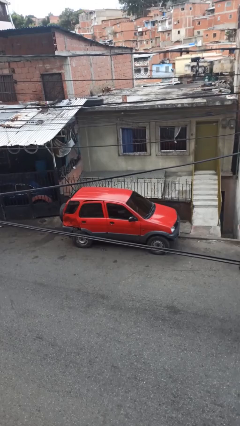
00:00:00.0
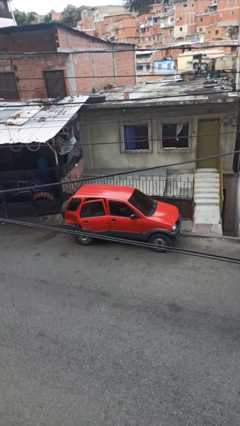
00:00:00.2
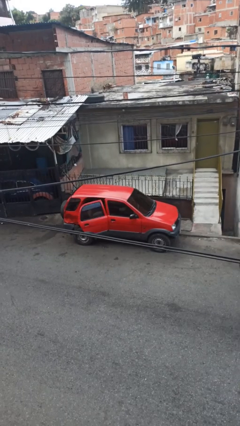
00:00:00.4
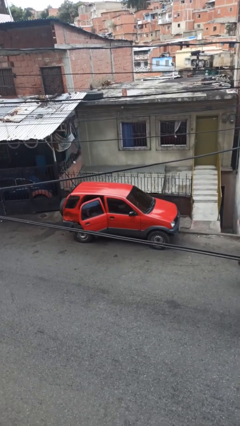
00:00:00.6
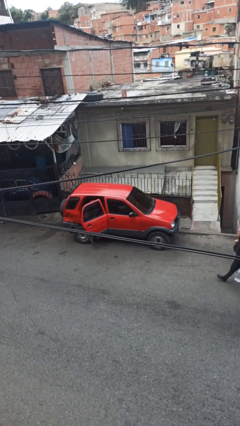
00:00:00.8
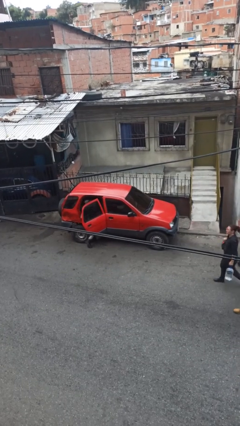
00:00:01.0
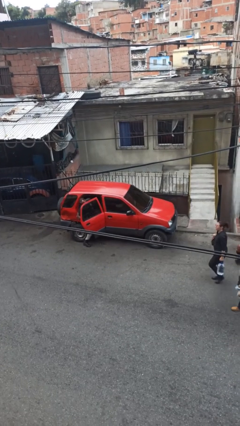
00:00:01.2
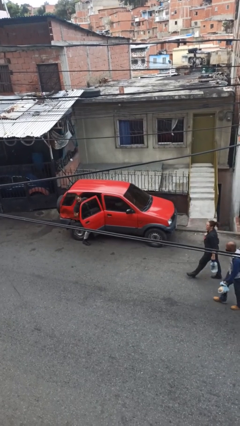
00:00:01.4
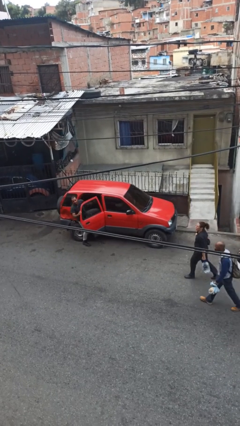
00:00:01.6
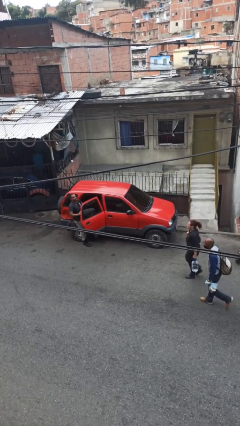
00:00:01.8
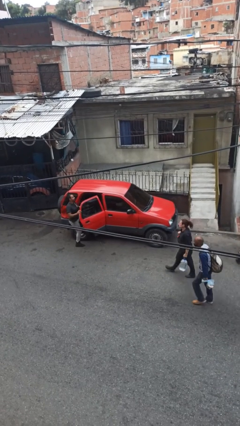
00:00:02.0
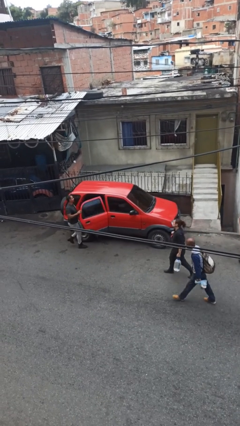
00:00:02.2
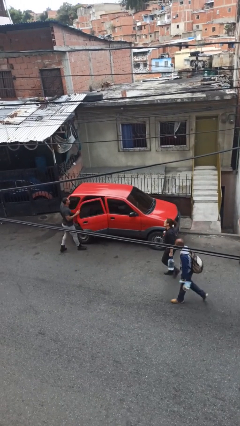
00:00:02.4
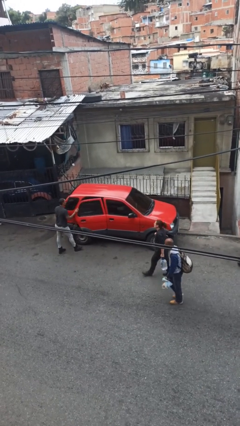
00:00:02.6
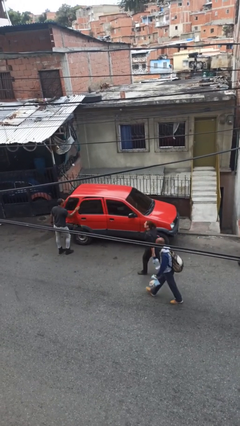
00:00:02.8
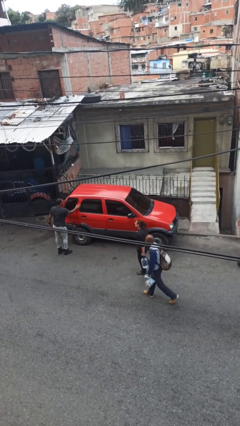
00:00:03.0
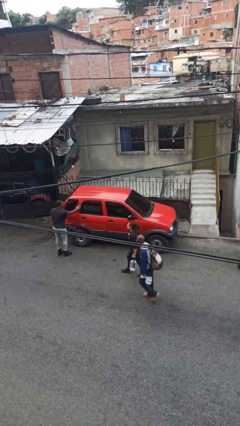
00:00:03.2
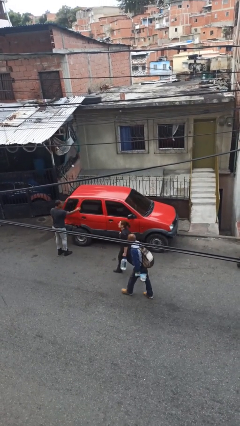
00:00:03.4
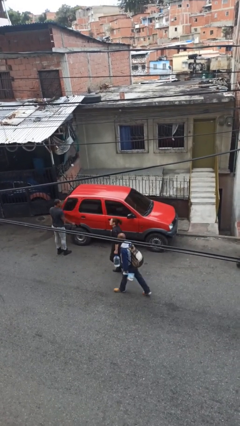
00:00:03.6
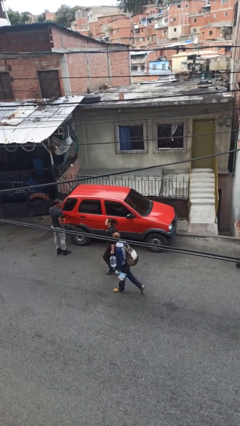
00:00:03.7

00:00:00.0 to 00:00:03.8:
car drops off person

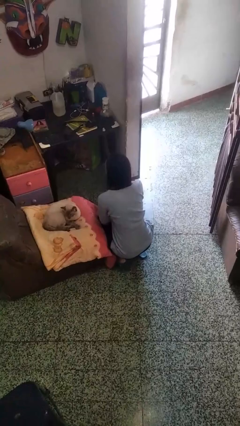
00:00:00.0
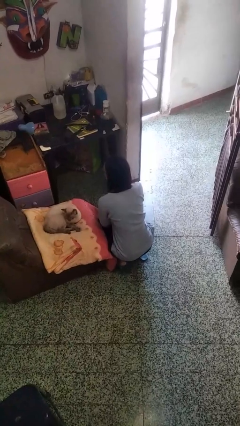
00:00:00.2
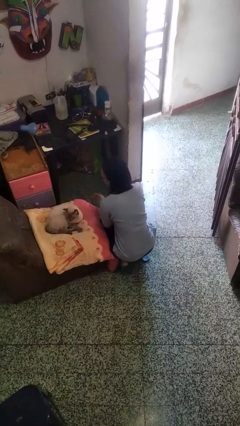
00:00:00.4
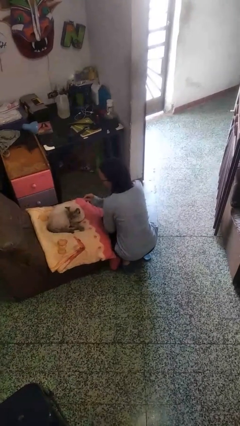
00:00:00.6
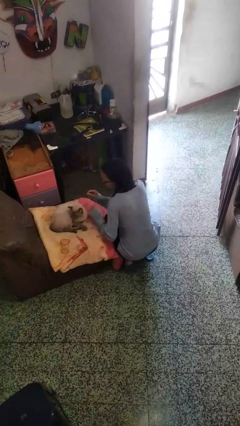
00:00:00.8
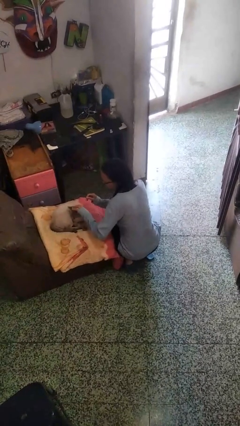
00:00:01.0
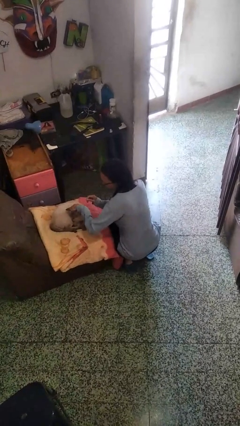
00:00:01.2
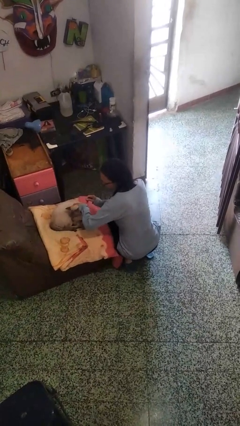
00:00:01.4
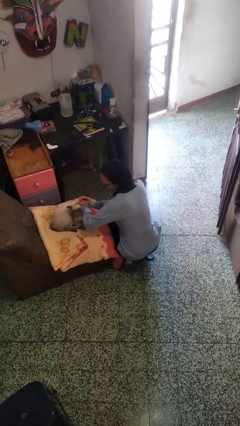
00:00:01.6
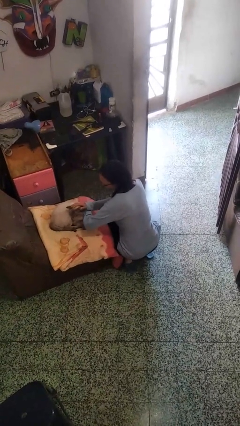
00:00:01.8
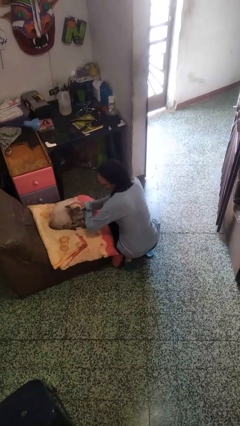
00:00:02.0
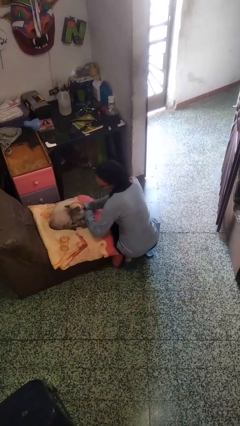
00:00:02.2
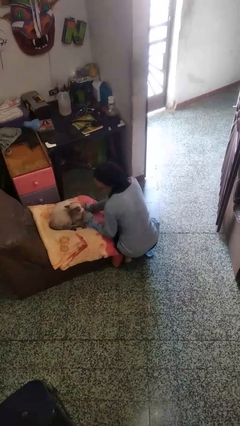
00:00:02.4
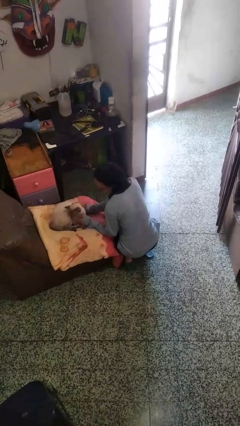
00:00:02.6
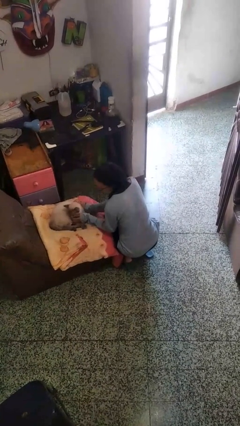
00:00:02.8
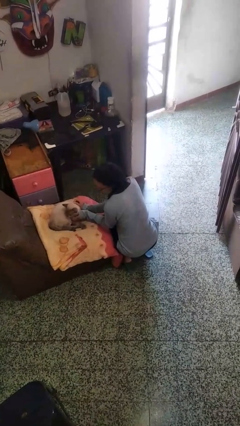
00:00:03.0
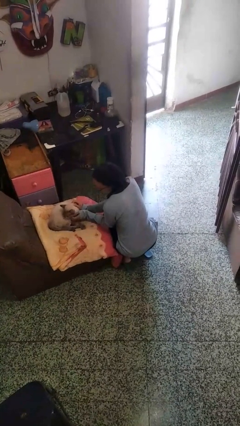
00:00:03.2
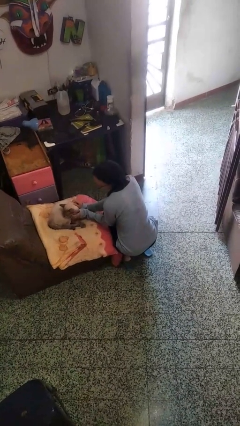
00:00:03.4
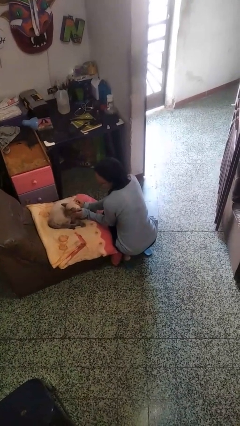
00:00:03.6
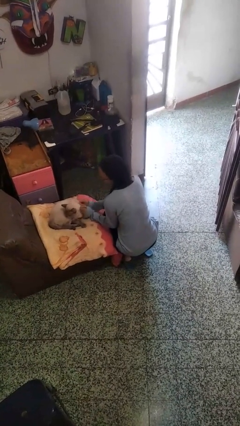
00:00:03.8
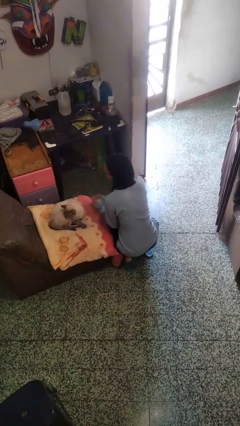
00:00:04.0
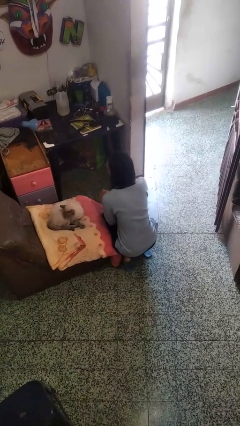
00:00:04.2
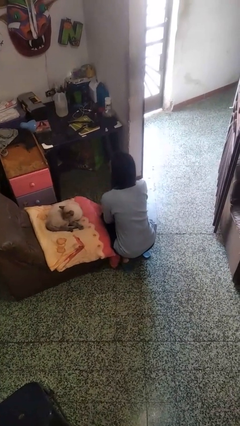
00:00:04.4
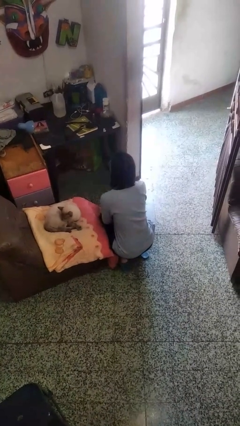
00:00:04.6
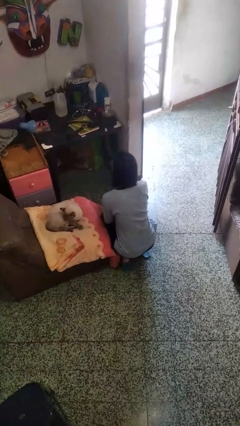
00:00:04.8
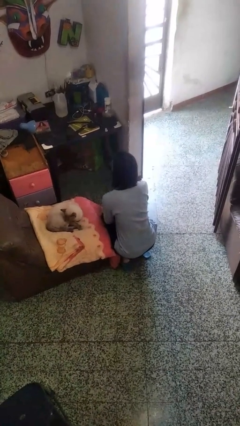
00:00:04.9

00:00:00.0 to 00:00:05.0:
person pets cat

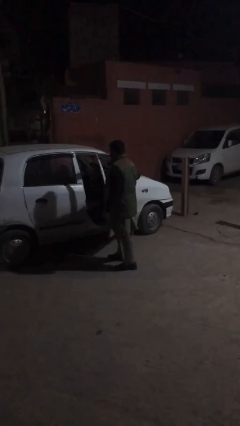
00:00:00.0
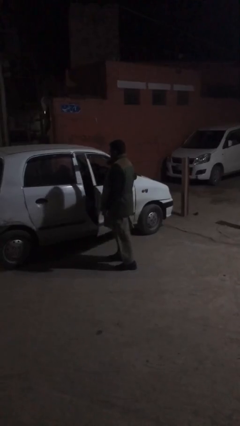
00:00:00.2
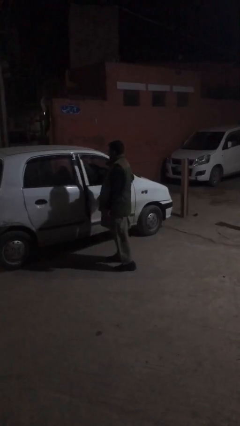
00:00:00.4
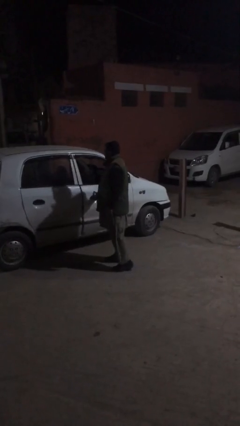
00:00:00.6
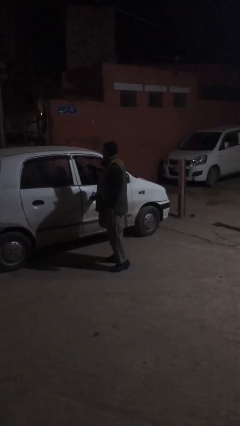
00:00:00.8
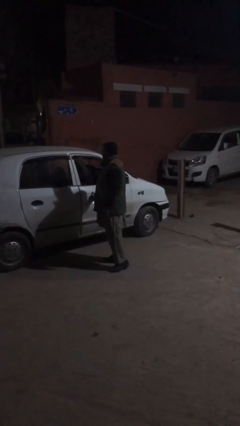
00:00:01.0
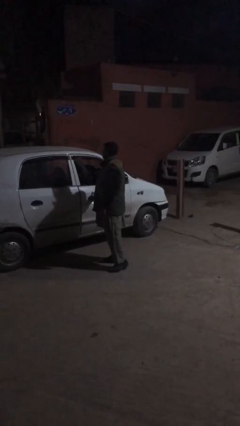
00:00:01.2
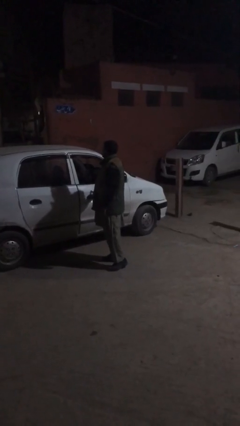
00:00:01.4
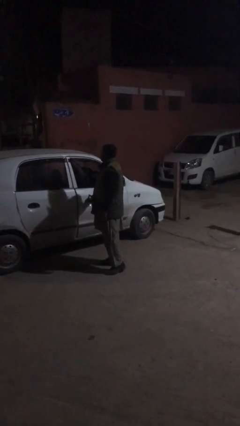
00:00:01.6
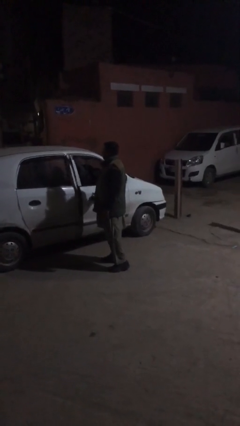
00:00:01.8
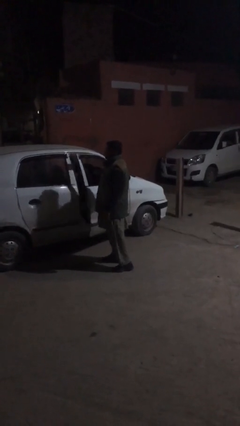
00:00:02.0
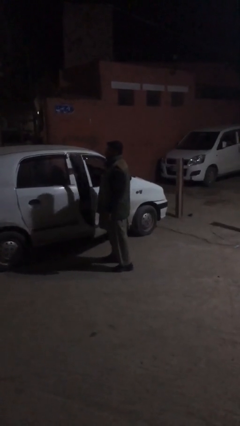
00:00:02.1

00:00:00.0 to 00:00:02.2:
person closes car door

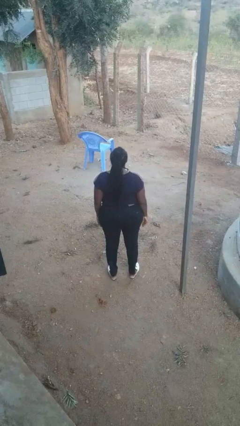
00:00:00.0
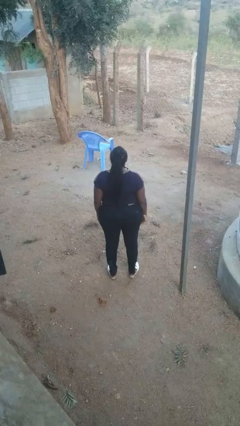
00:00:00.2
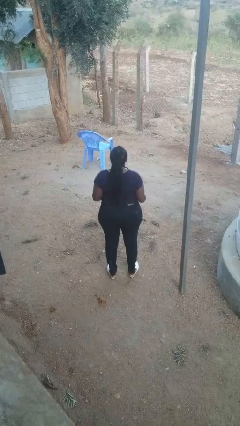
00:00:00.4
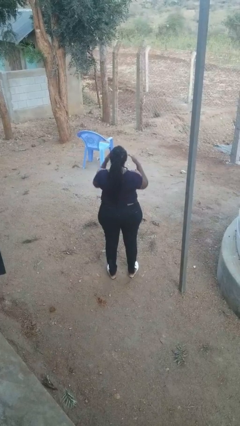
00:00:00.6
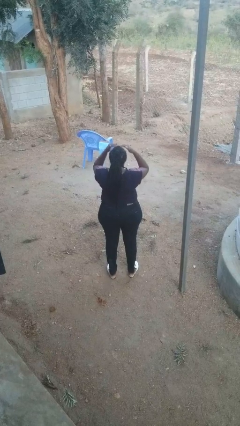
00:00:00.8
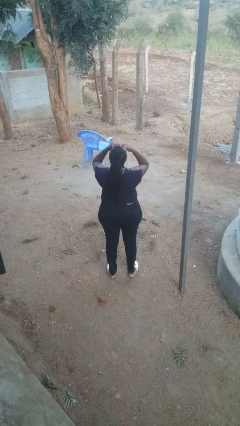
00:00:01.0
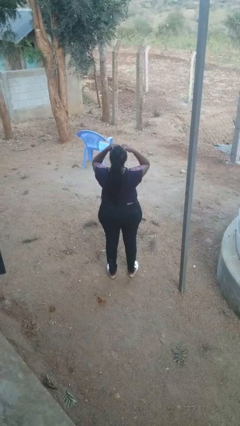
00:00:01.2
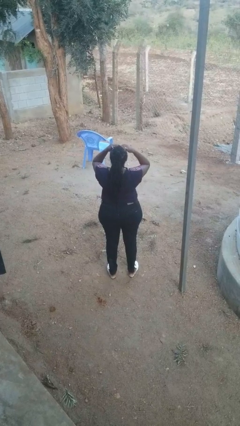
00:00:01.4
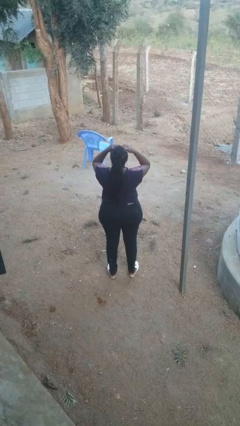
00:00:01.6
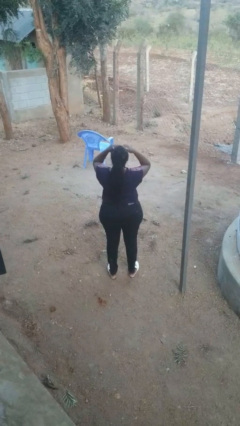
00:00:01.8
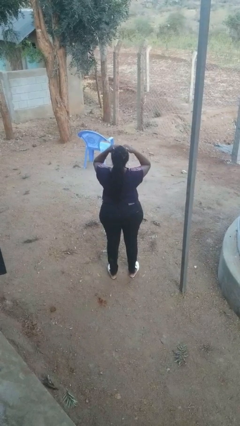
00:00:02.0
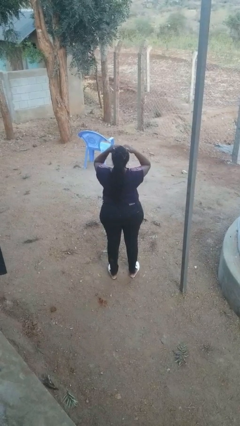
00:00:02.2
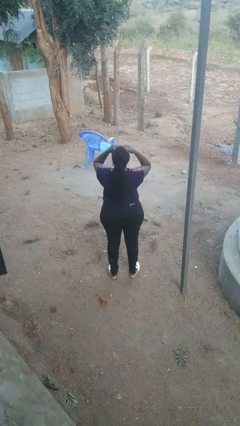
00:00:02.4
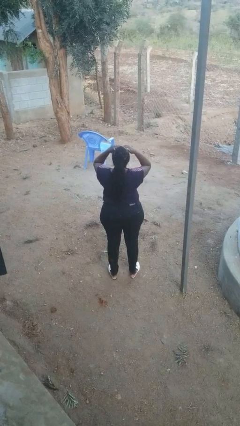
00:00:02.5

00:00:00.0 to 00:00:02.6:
person shades eyes

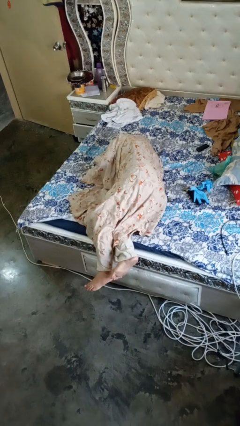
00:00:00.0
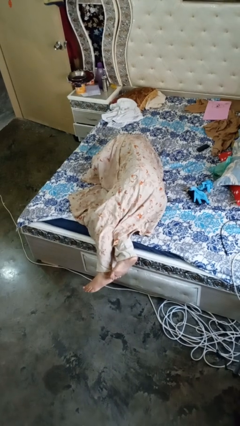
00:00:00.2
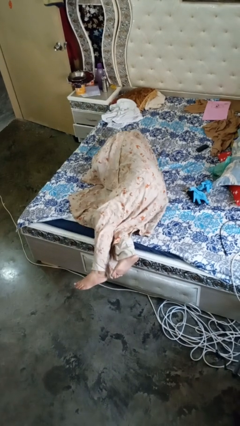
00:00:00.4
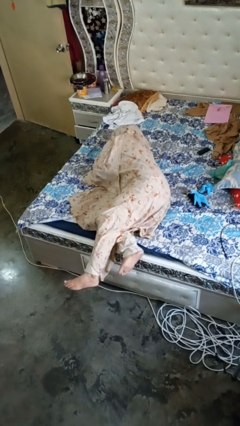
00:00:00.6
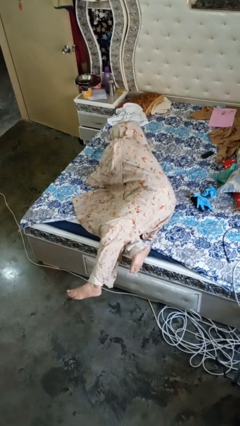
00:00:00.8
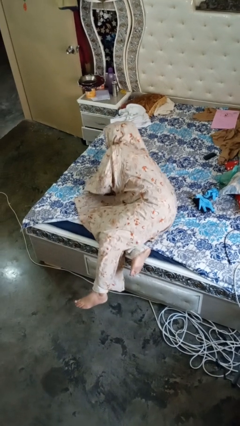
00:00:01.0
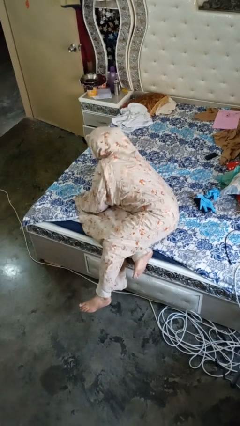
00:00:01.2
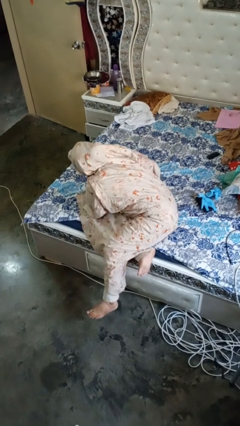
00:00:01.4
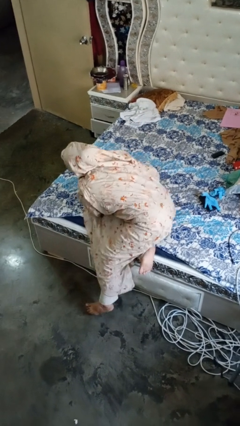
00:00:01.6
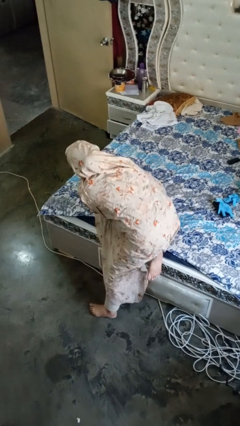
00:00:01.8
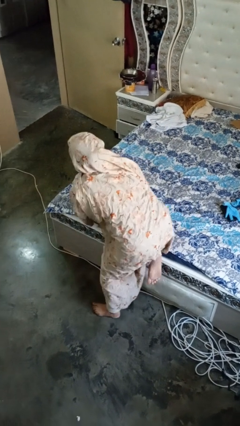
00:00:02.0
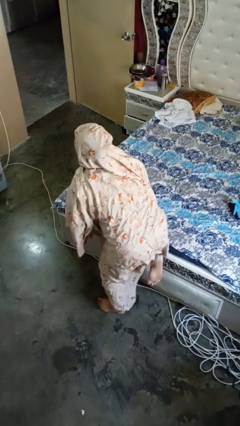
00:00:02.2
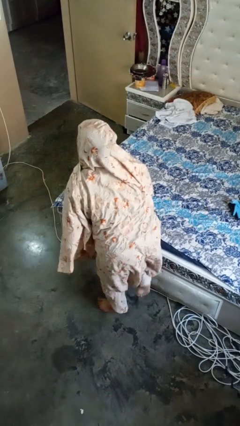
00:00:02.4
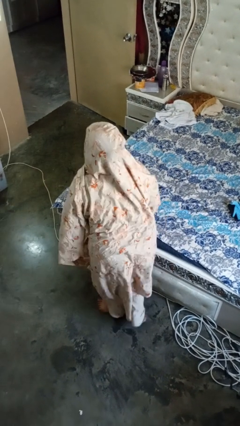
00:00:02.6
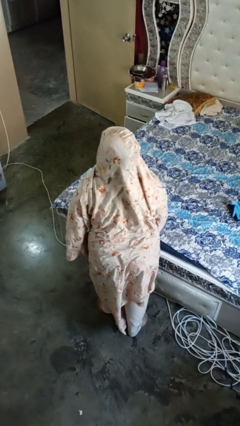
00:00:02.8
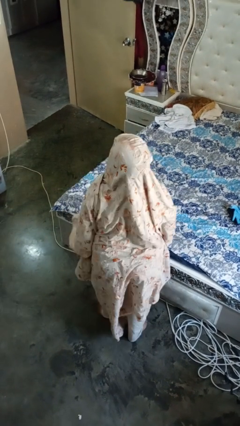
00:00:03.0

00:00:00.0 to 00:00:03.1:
person stands up

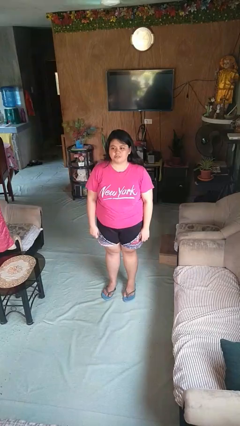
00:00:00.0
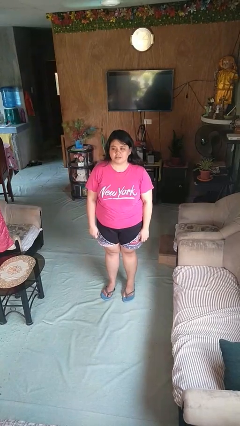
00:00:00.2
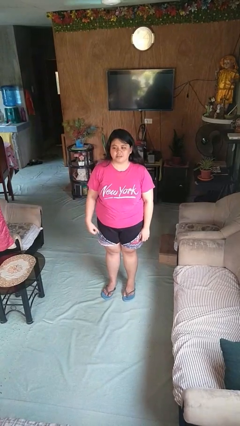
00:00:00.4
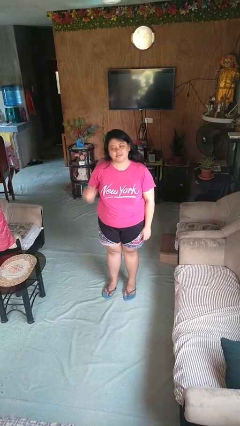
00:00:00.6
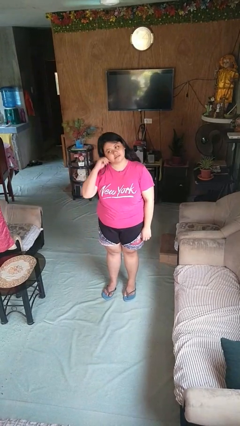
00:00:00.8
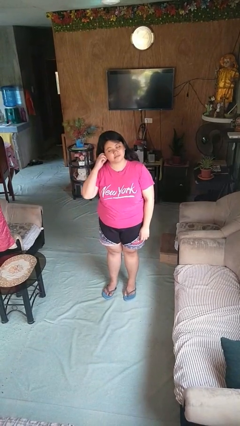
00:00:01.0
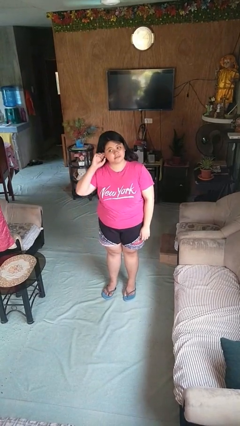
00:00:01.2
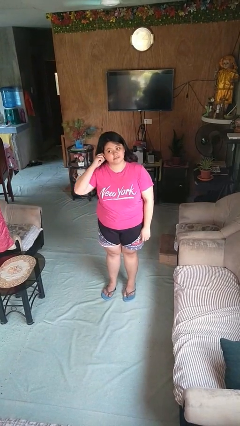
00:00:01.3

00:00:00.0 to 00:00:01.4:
person touches earlobe
